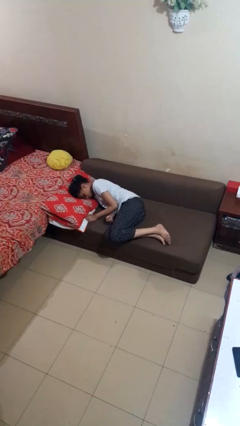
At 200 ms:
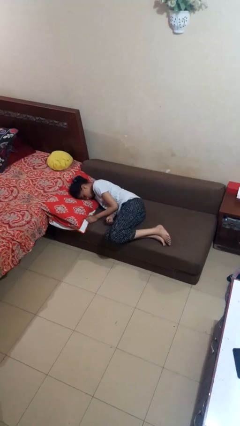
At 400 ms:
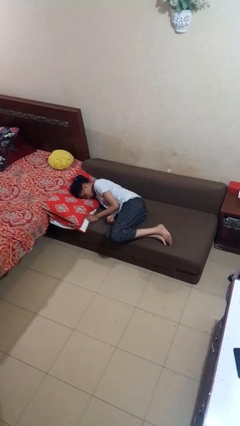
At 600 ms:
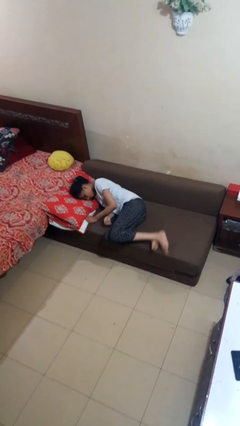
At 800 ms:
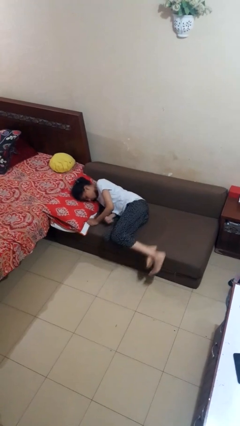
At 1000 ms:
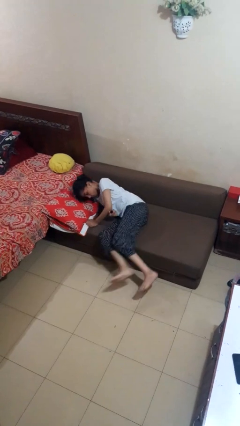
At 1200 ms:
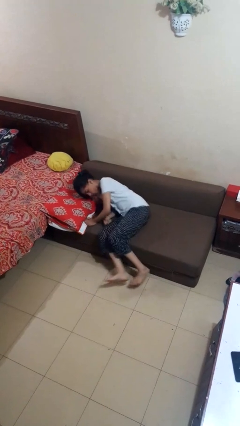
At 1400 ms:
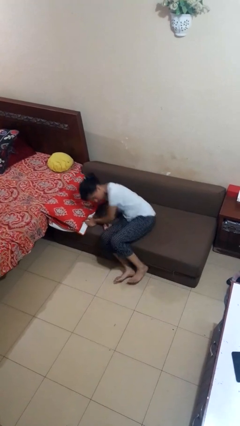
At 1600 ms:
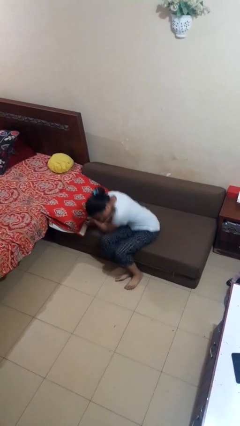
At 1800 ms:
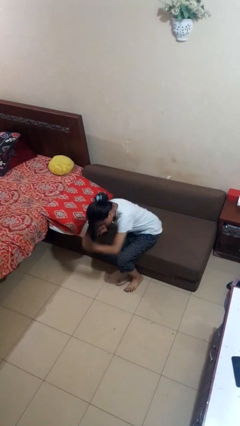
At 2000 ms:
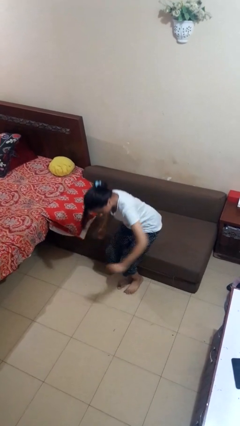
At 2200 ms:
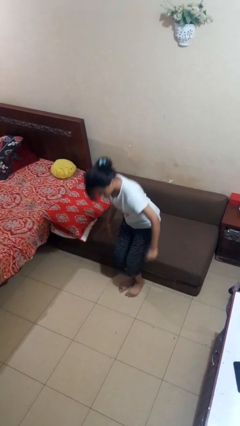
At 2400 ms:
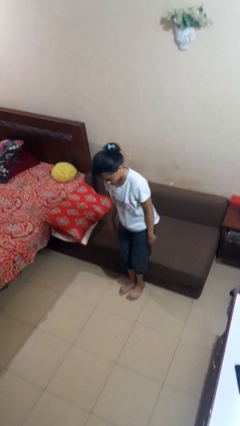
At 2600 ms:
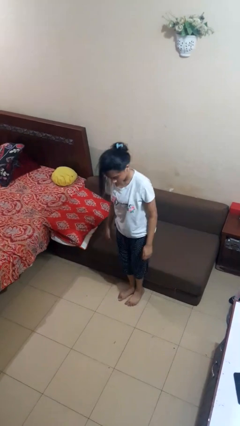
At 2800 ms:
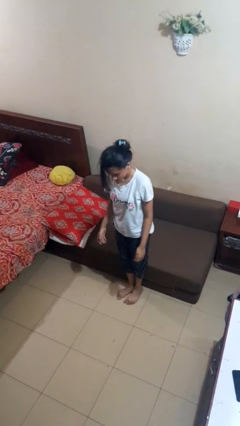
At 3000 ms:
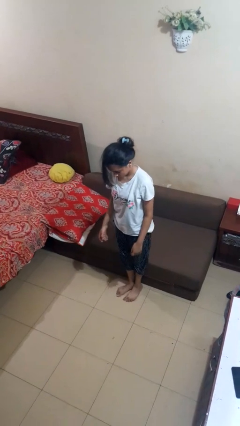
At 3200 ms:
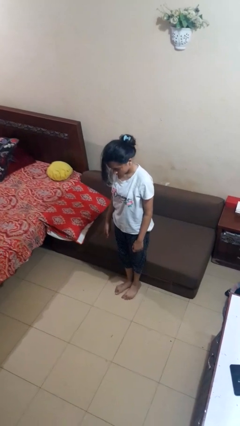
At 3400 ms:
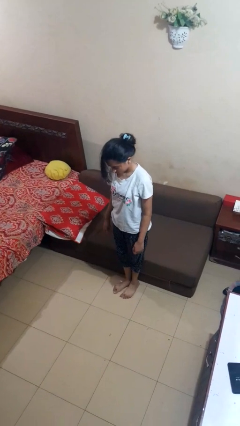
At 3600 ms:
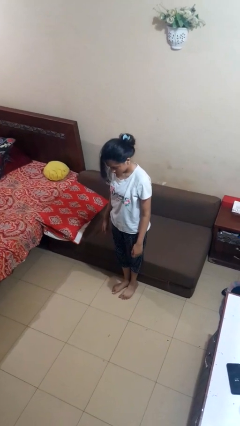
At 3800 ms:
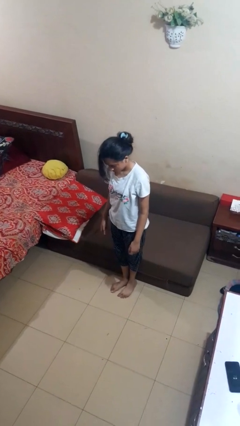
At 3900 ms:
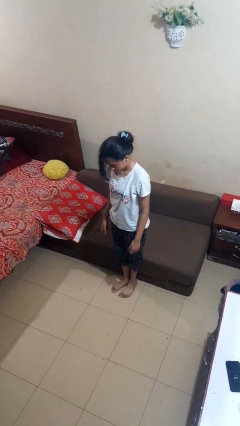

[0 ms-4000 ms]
person stands up

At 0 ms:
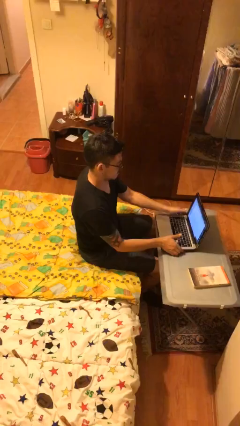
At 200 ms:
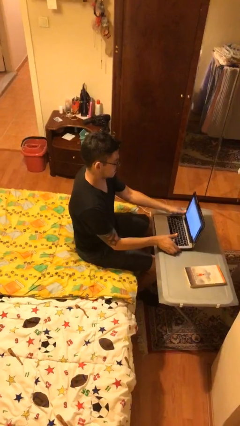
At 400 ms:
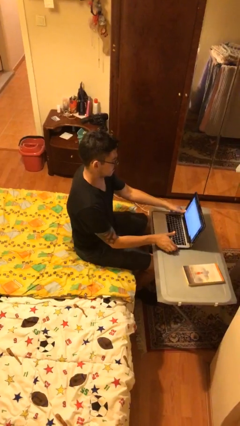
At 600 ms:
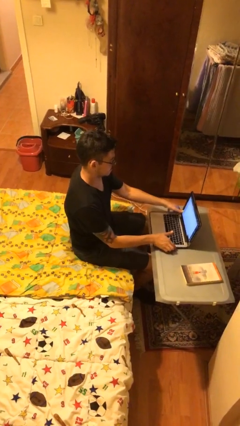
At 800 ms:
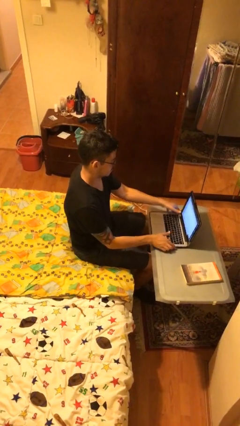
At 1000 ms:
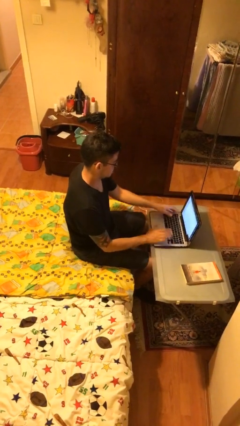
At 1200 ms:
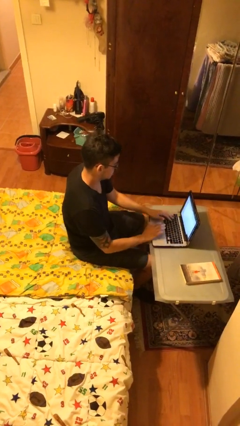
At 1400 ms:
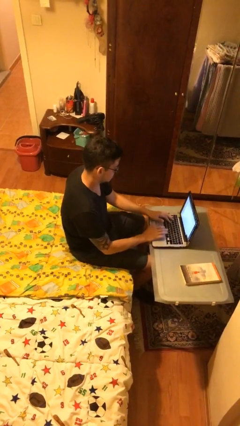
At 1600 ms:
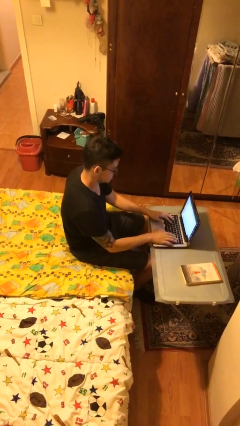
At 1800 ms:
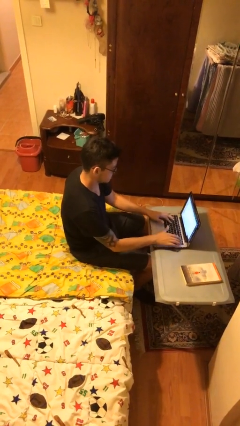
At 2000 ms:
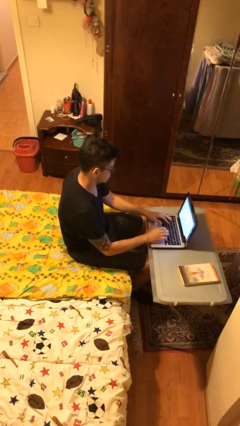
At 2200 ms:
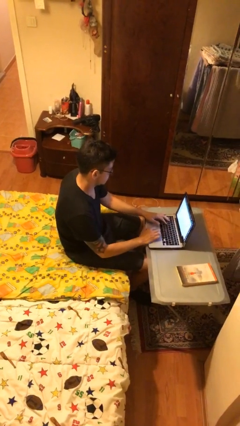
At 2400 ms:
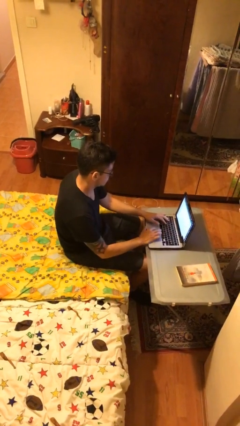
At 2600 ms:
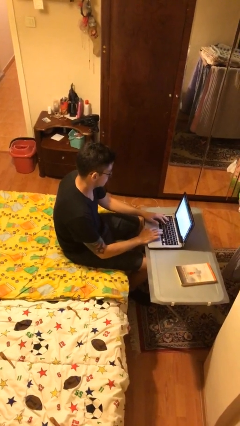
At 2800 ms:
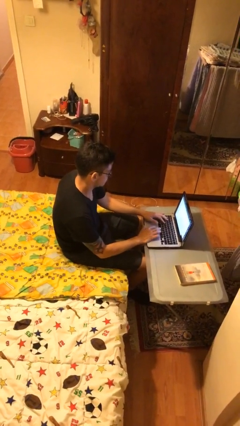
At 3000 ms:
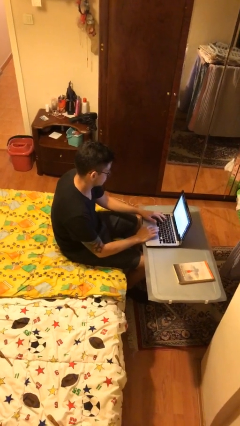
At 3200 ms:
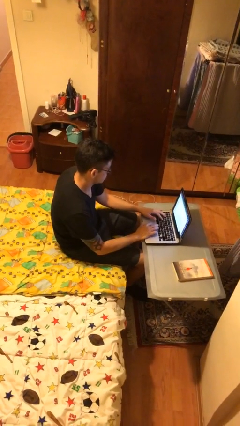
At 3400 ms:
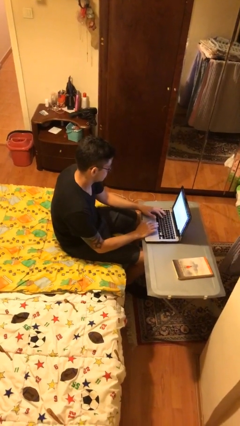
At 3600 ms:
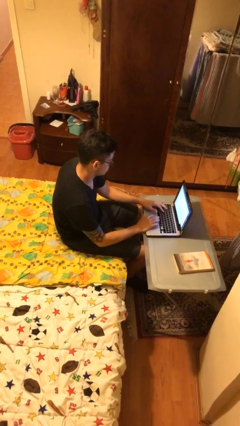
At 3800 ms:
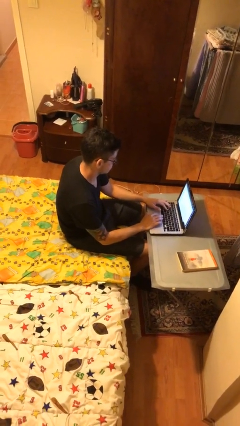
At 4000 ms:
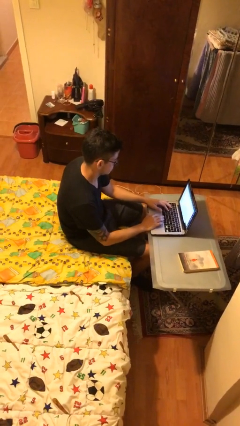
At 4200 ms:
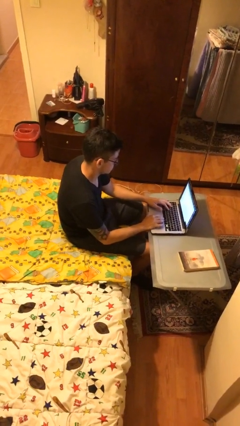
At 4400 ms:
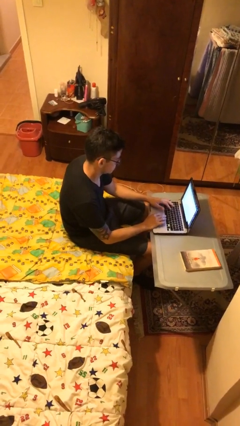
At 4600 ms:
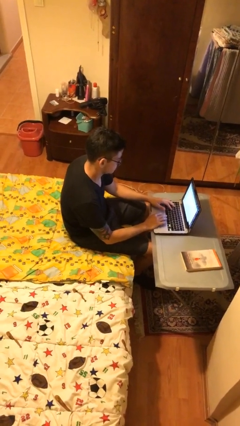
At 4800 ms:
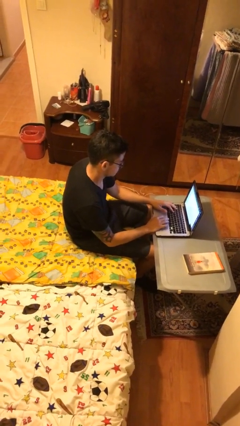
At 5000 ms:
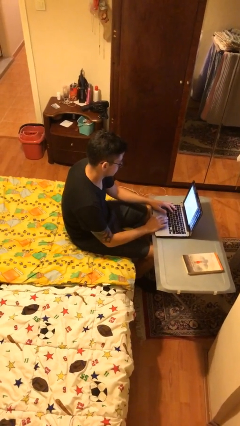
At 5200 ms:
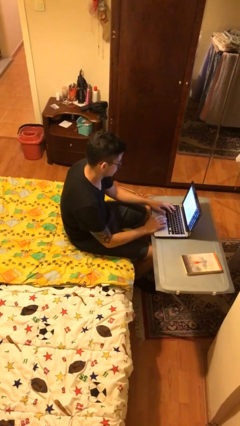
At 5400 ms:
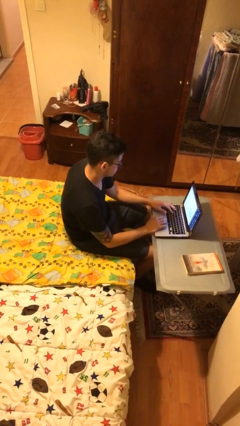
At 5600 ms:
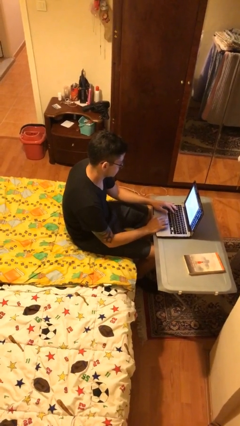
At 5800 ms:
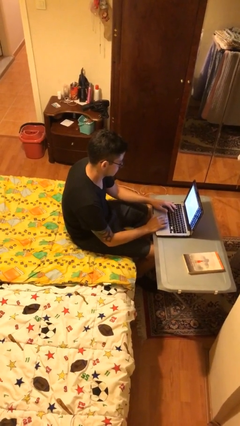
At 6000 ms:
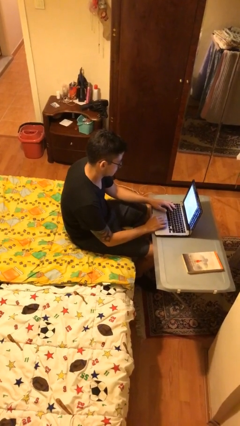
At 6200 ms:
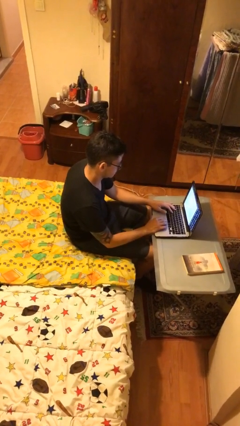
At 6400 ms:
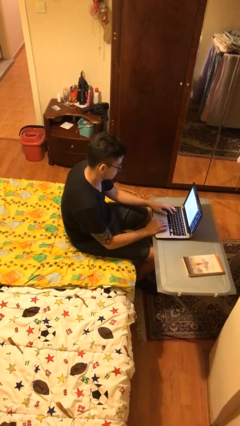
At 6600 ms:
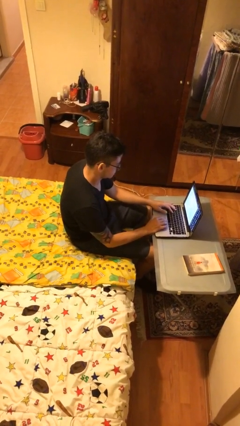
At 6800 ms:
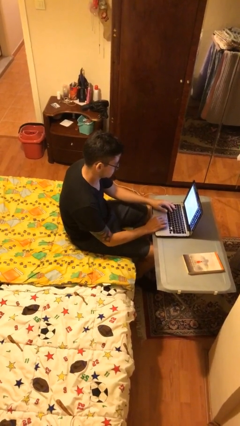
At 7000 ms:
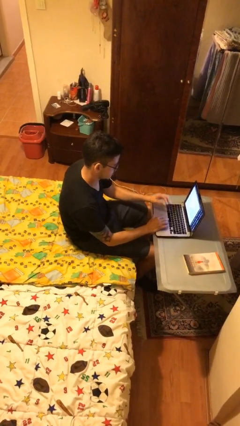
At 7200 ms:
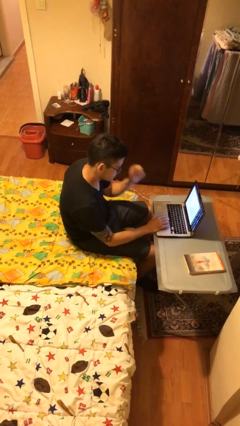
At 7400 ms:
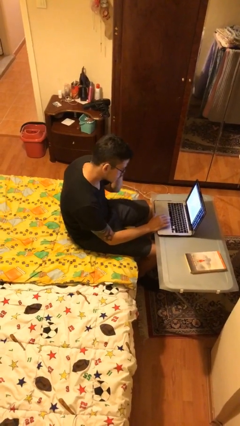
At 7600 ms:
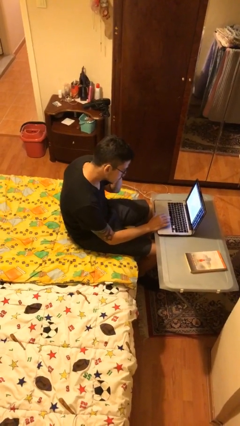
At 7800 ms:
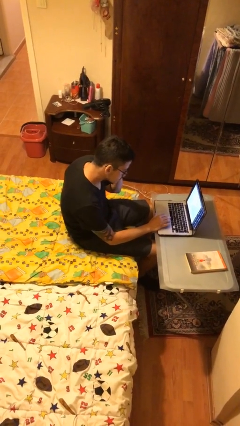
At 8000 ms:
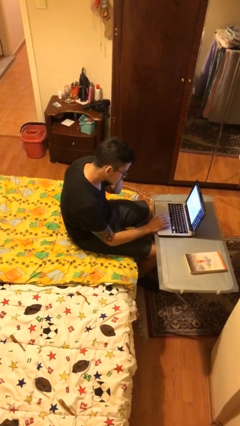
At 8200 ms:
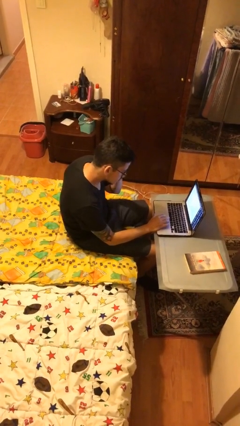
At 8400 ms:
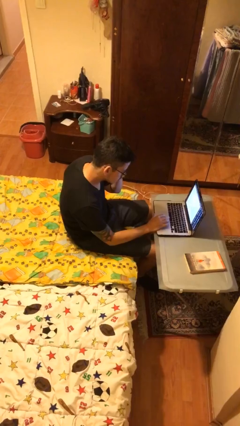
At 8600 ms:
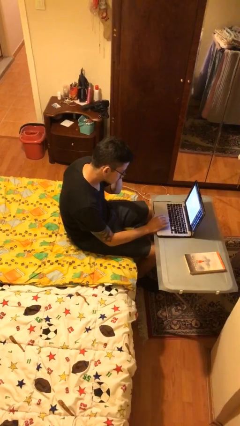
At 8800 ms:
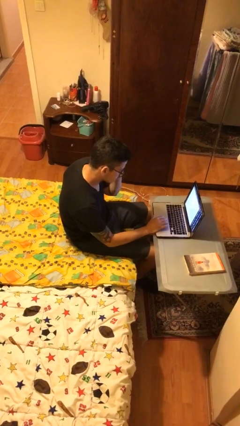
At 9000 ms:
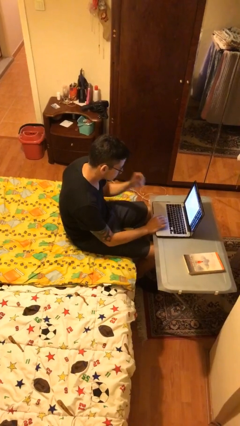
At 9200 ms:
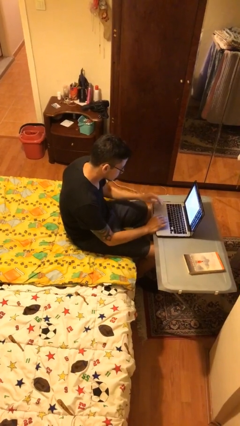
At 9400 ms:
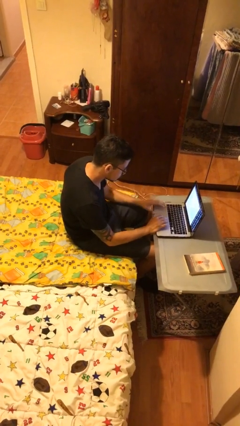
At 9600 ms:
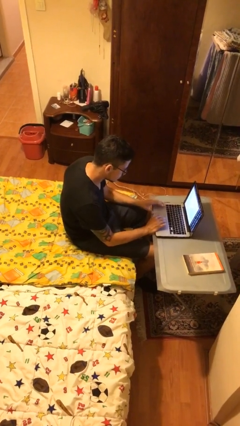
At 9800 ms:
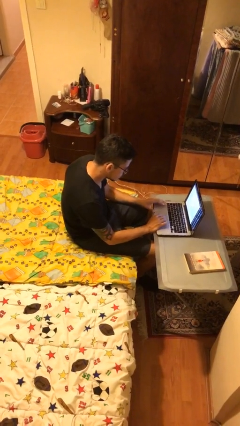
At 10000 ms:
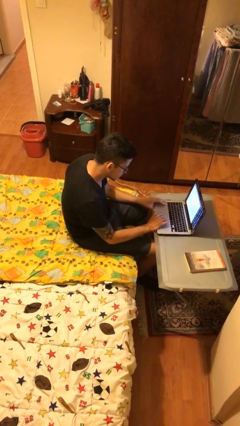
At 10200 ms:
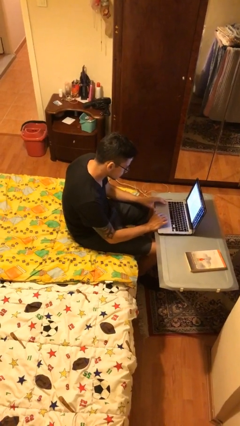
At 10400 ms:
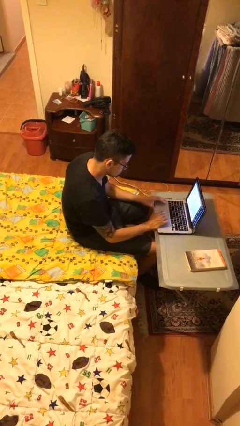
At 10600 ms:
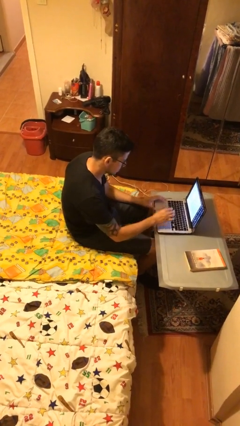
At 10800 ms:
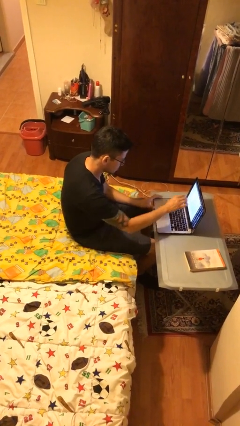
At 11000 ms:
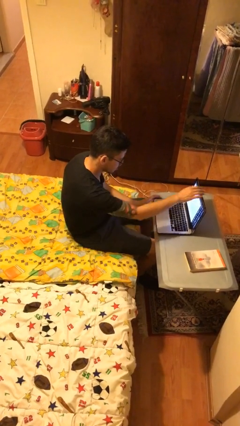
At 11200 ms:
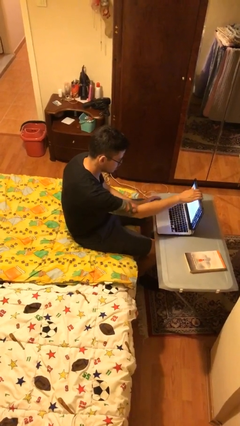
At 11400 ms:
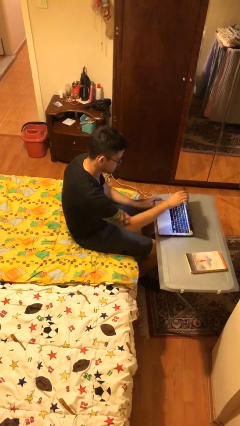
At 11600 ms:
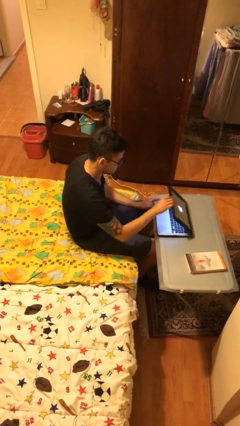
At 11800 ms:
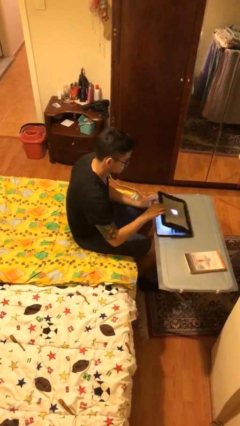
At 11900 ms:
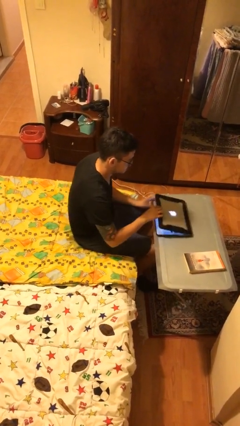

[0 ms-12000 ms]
person interacts with laptop

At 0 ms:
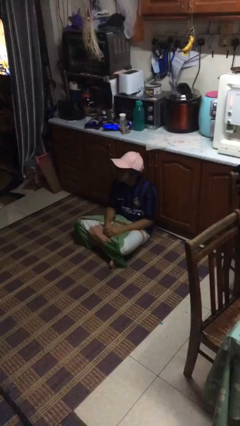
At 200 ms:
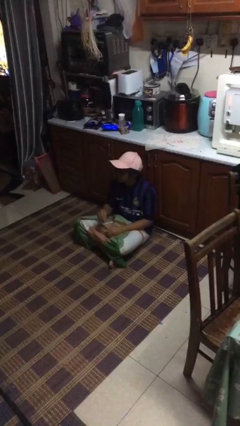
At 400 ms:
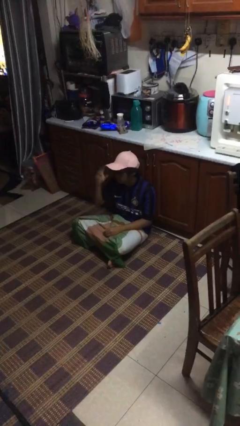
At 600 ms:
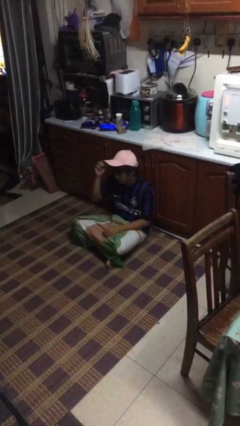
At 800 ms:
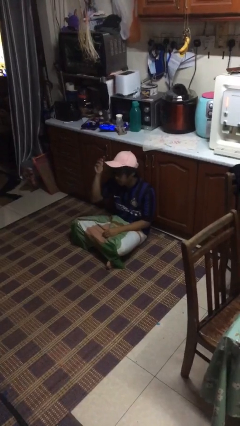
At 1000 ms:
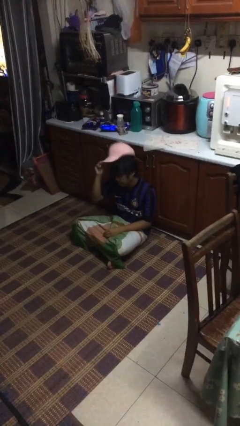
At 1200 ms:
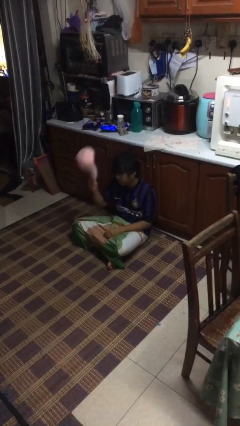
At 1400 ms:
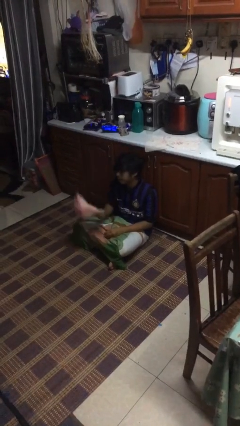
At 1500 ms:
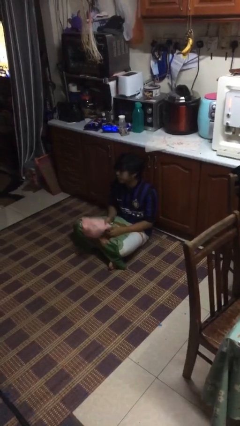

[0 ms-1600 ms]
person takes off hat
